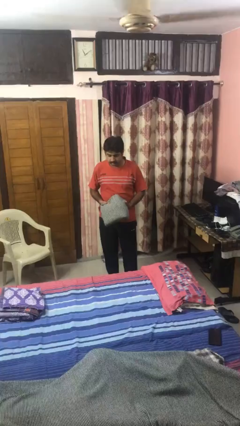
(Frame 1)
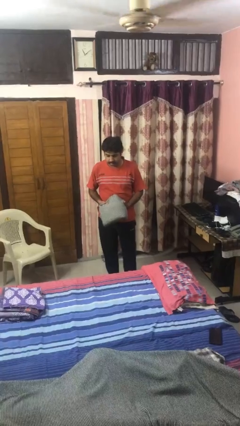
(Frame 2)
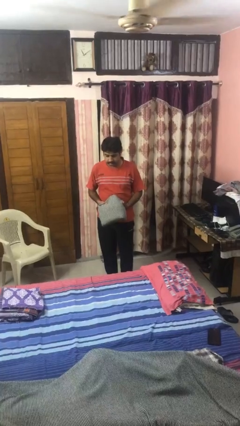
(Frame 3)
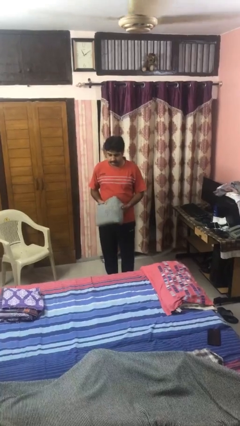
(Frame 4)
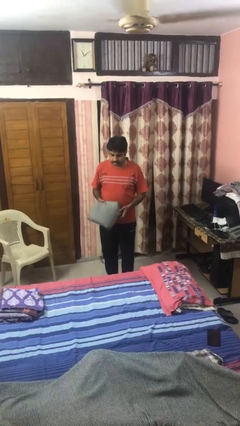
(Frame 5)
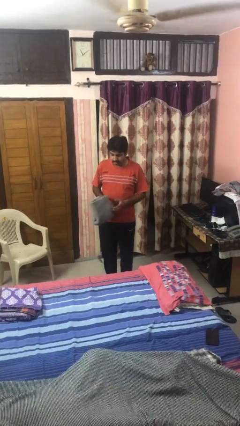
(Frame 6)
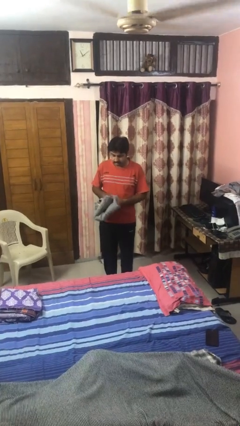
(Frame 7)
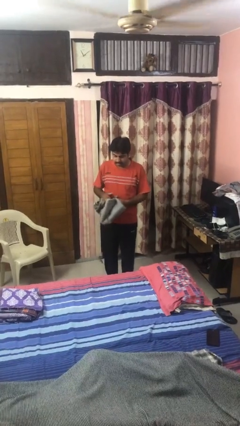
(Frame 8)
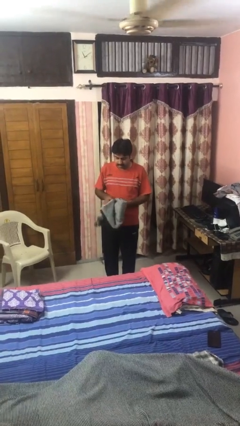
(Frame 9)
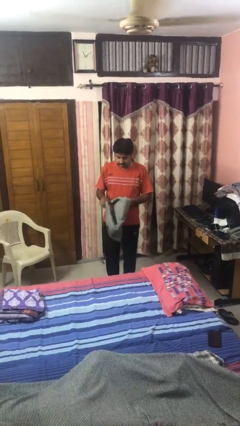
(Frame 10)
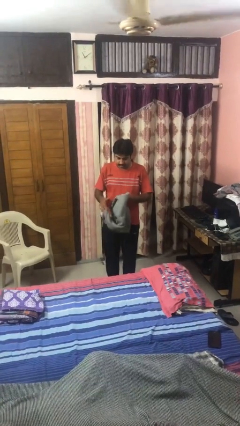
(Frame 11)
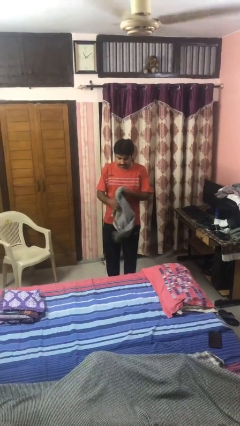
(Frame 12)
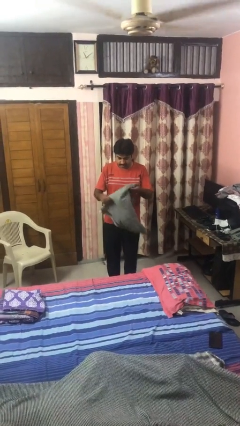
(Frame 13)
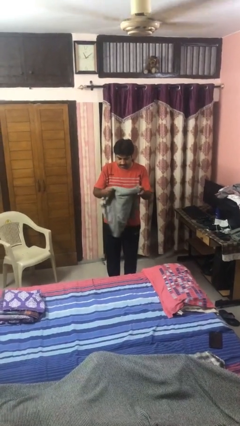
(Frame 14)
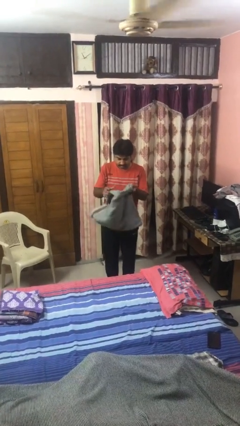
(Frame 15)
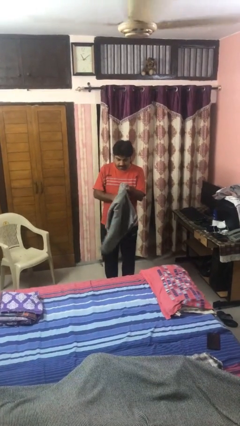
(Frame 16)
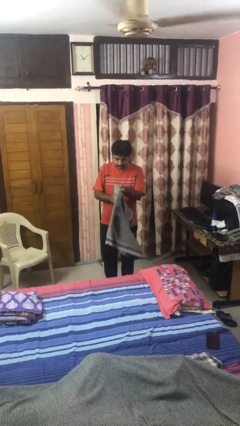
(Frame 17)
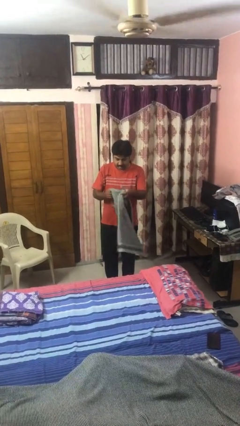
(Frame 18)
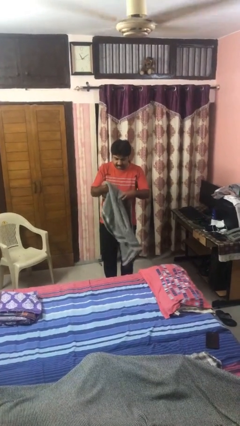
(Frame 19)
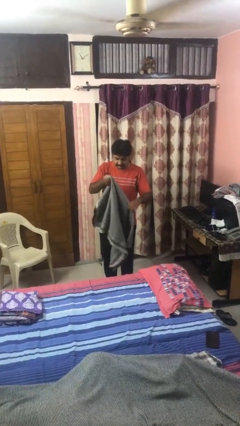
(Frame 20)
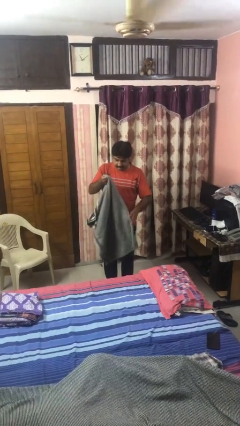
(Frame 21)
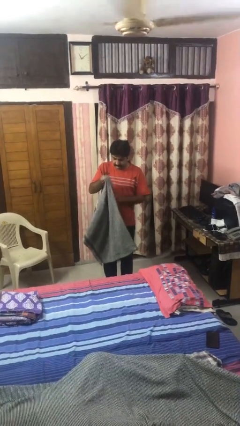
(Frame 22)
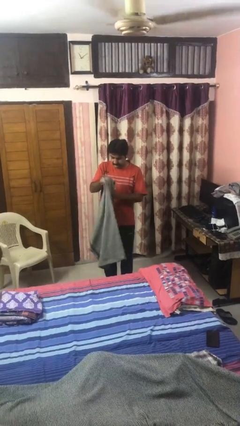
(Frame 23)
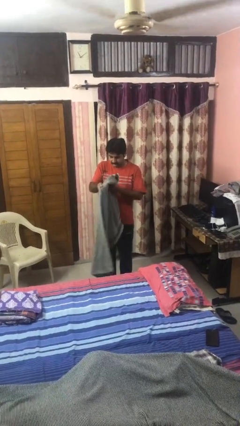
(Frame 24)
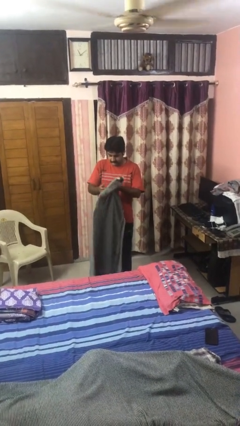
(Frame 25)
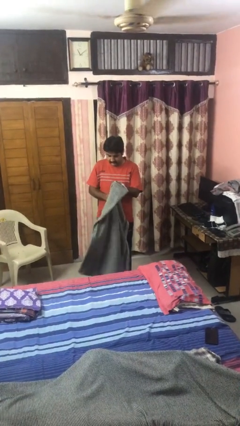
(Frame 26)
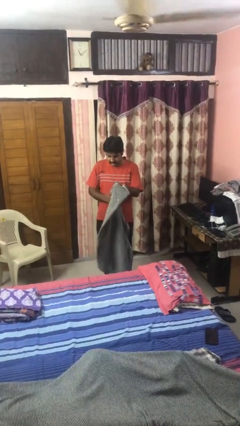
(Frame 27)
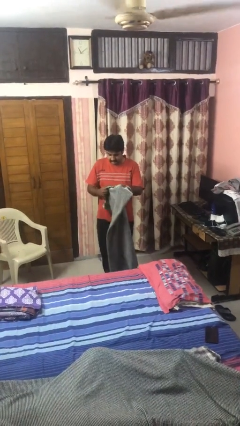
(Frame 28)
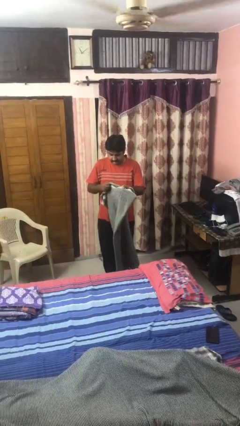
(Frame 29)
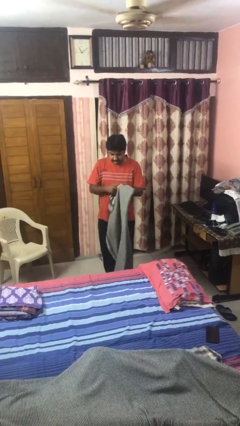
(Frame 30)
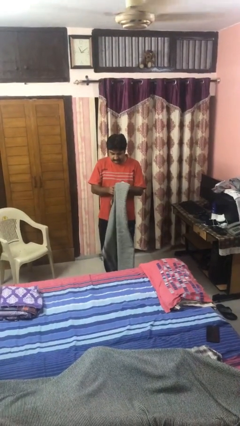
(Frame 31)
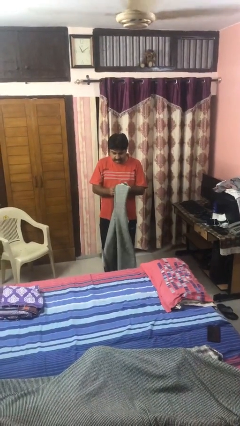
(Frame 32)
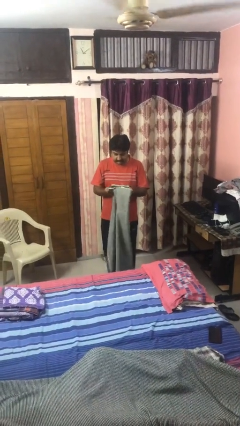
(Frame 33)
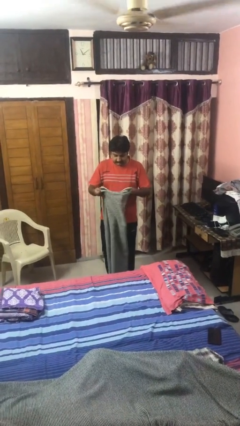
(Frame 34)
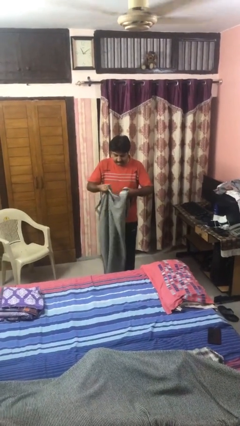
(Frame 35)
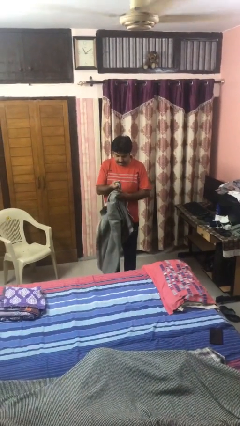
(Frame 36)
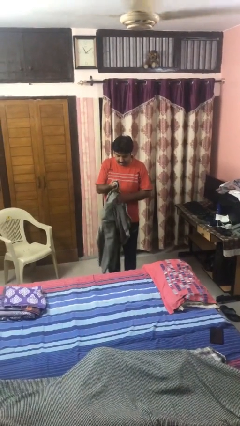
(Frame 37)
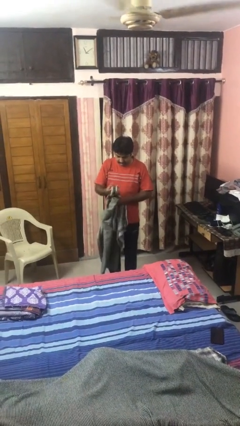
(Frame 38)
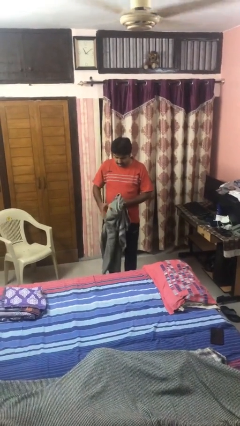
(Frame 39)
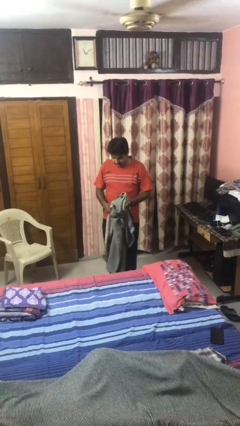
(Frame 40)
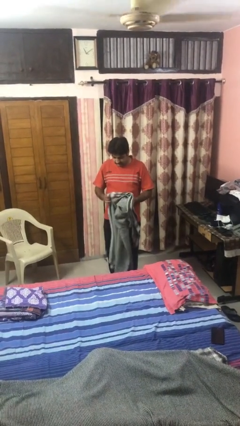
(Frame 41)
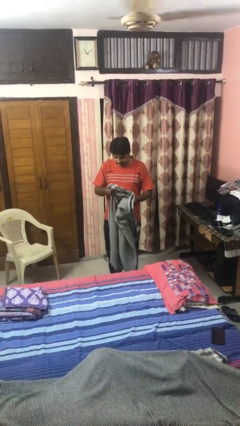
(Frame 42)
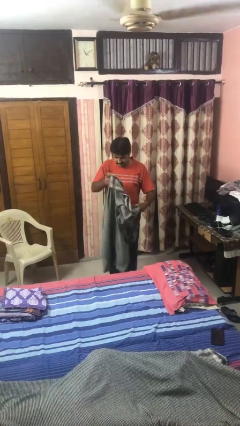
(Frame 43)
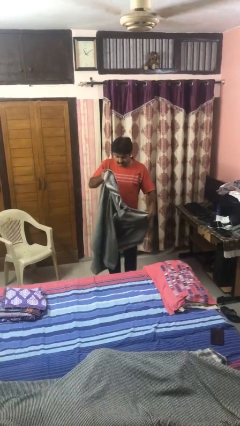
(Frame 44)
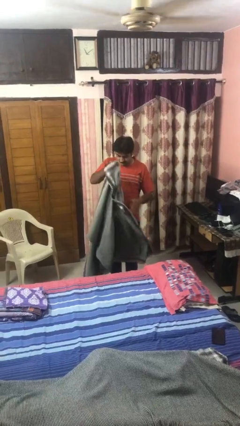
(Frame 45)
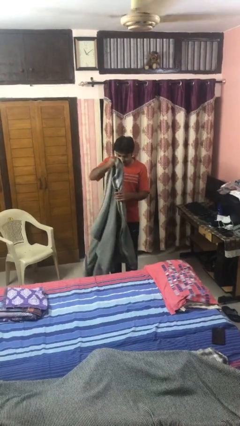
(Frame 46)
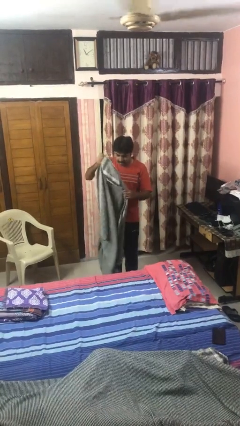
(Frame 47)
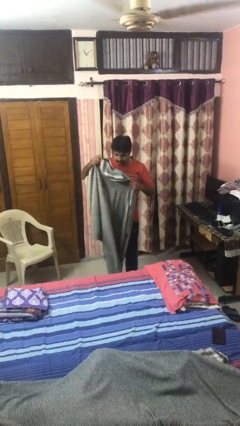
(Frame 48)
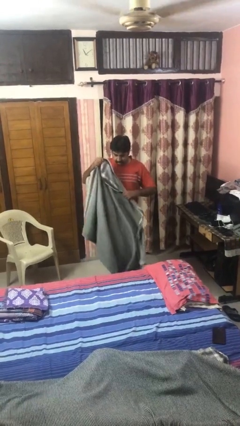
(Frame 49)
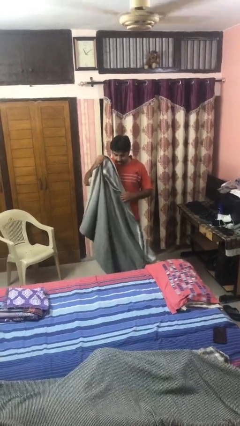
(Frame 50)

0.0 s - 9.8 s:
person unfolds blanket

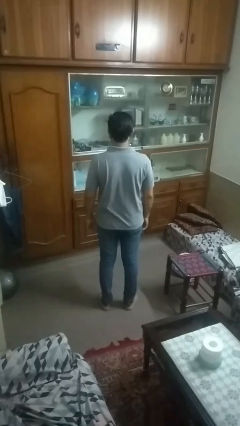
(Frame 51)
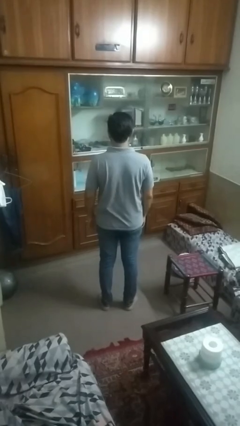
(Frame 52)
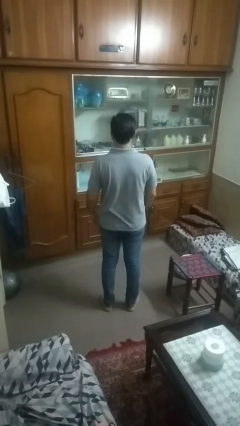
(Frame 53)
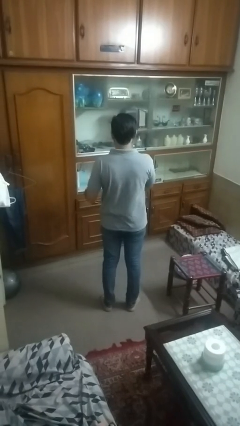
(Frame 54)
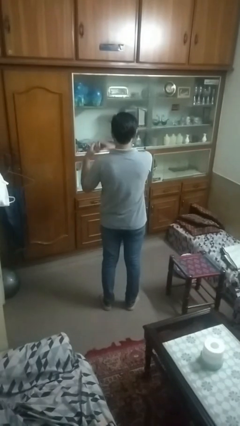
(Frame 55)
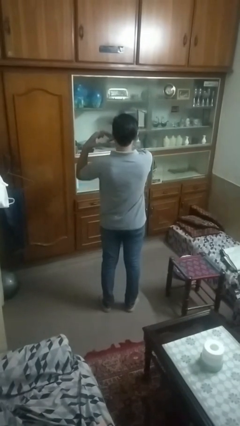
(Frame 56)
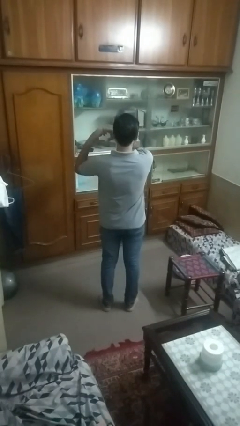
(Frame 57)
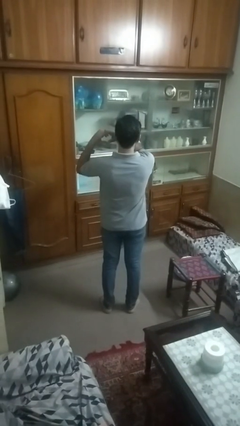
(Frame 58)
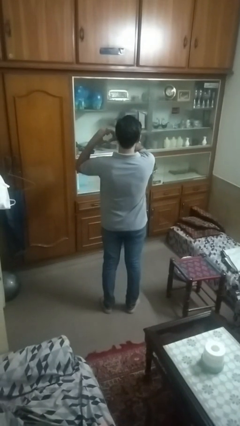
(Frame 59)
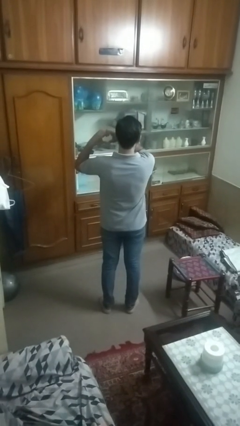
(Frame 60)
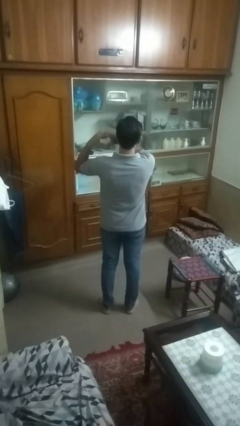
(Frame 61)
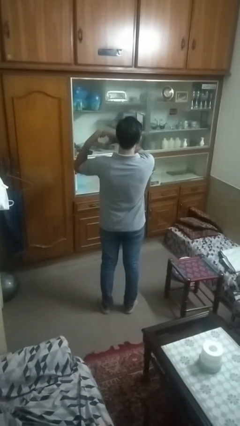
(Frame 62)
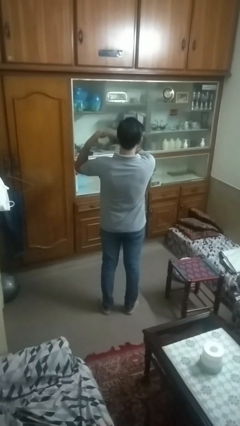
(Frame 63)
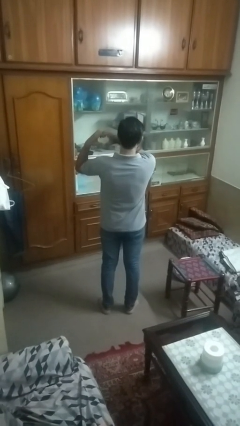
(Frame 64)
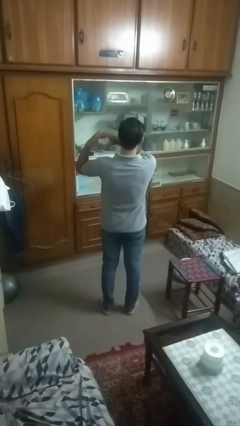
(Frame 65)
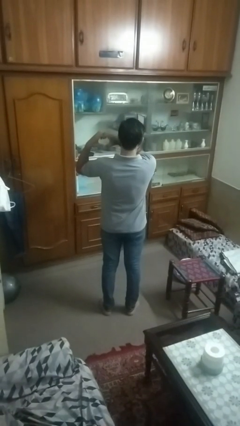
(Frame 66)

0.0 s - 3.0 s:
person gestures heart

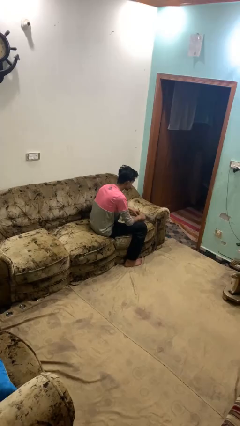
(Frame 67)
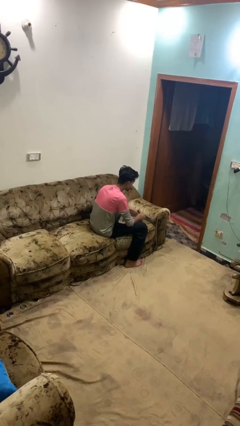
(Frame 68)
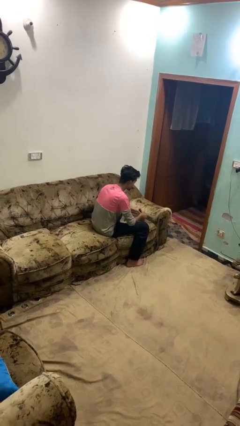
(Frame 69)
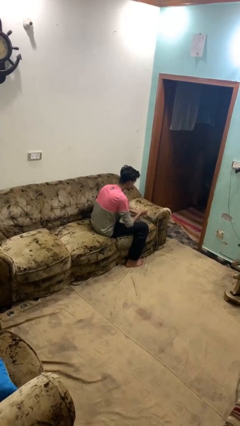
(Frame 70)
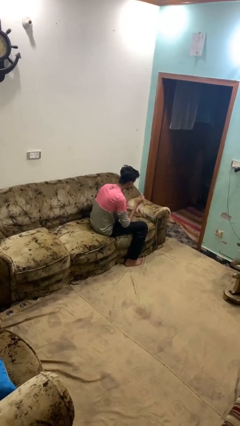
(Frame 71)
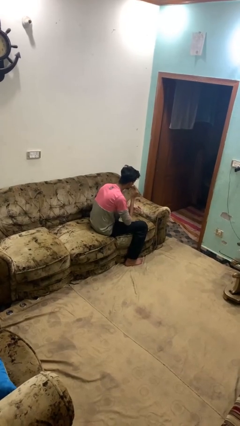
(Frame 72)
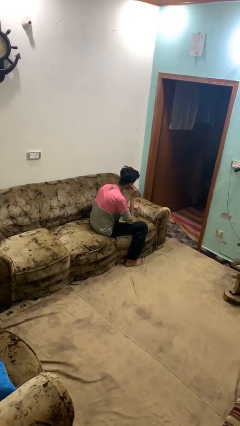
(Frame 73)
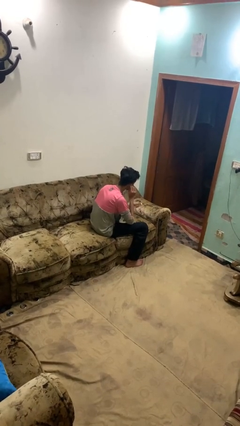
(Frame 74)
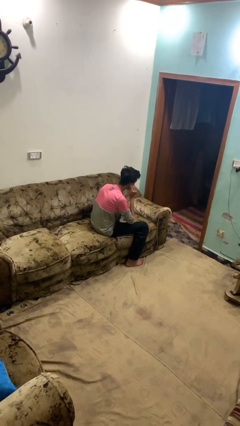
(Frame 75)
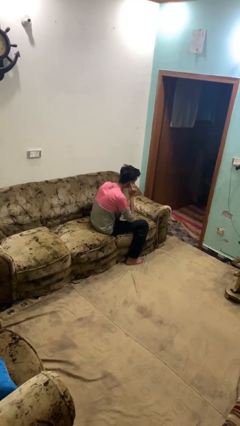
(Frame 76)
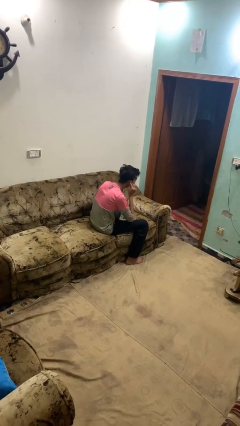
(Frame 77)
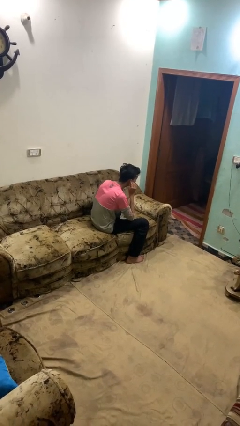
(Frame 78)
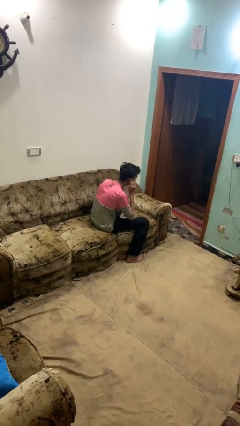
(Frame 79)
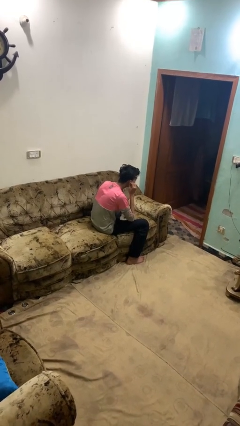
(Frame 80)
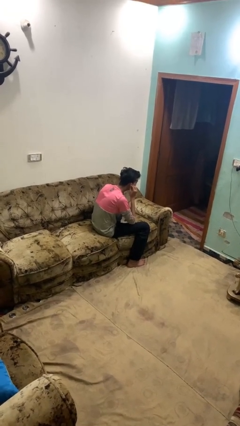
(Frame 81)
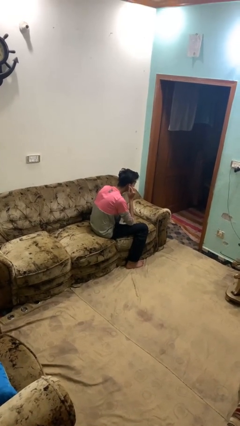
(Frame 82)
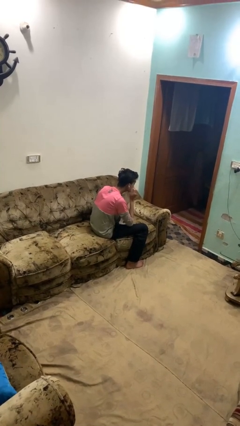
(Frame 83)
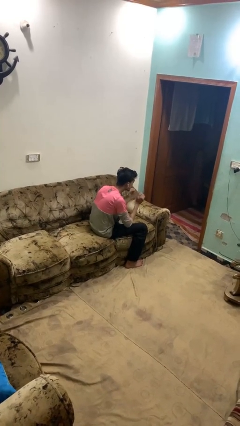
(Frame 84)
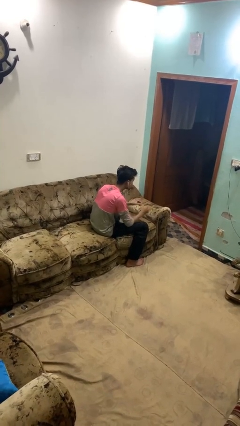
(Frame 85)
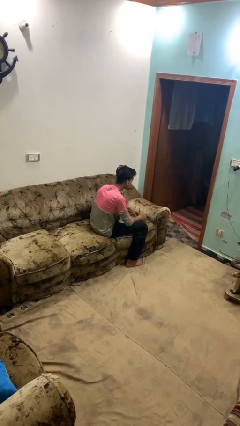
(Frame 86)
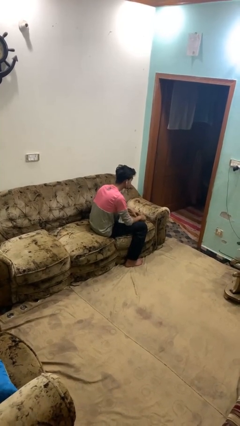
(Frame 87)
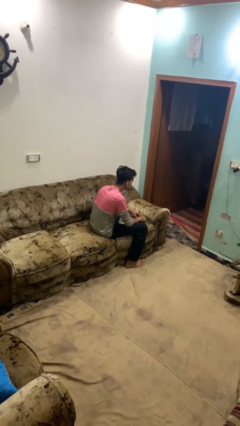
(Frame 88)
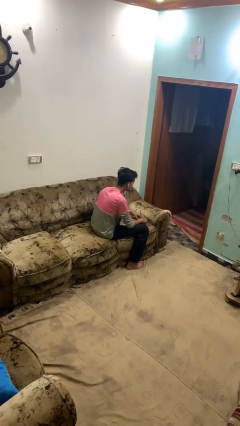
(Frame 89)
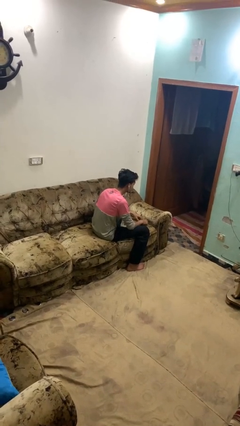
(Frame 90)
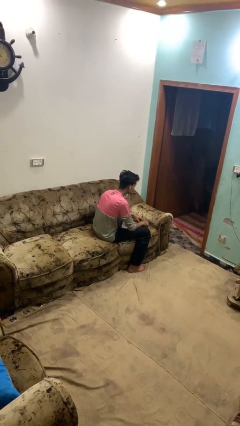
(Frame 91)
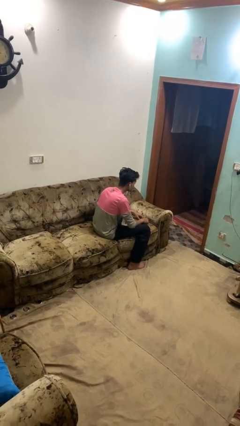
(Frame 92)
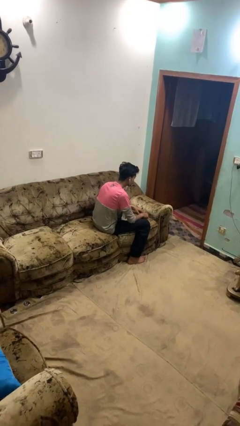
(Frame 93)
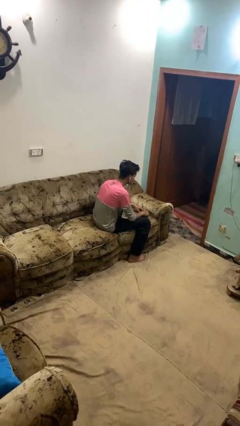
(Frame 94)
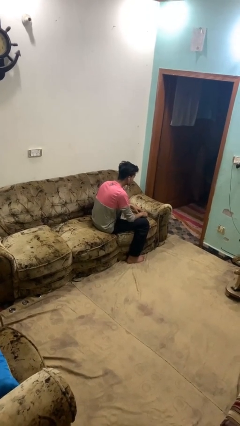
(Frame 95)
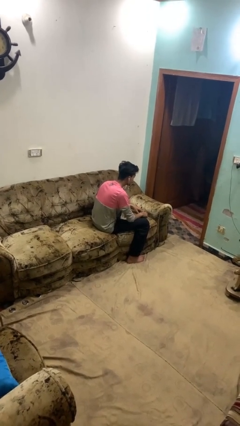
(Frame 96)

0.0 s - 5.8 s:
person puts on headphones
